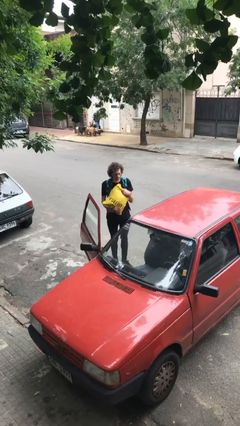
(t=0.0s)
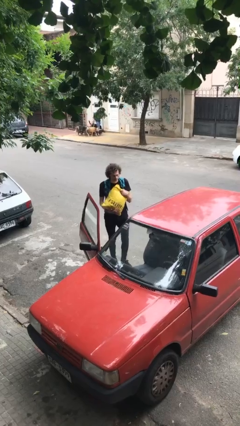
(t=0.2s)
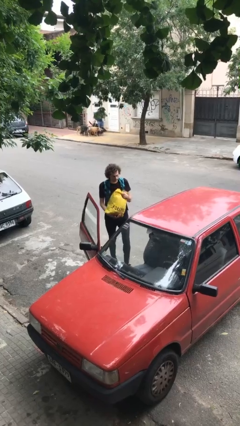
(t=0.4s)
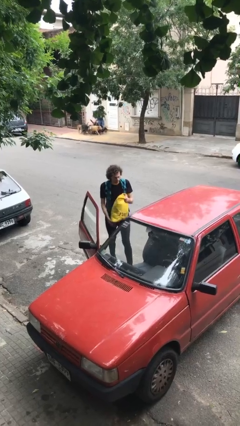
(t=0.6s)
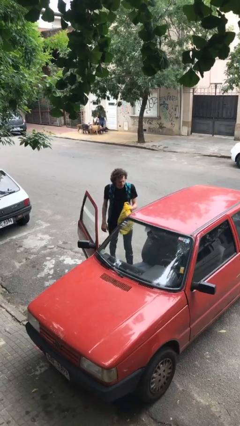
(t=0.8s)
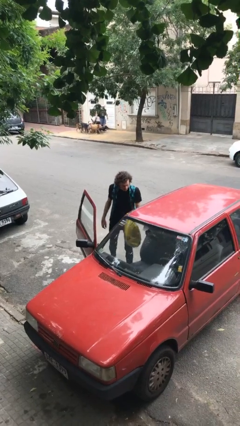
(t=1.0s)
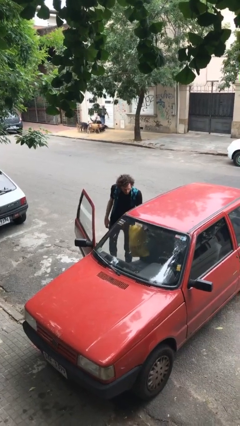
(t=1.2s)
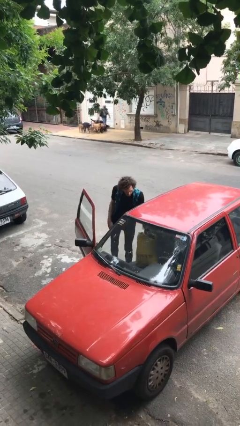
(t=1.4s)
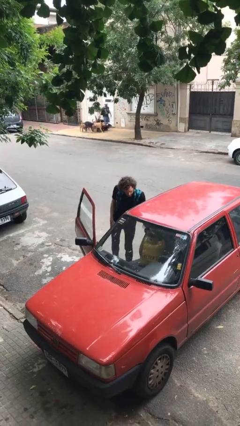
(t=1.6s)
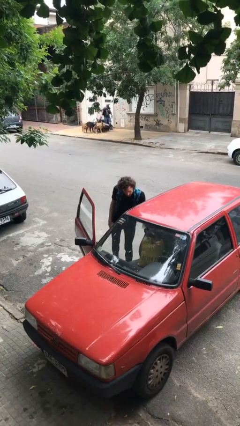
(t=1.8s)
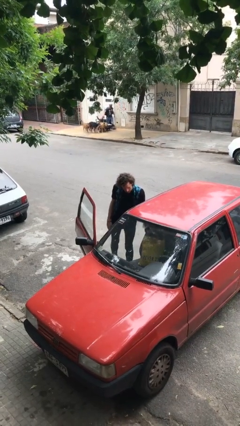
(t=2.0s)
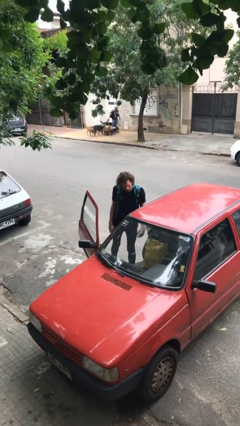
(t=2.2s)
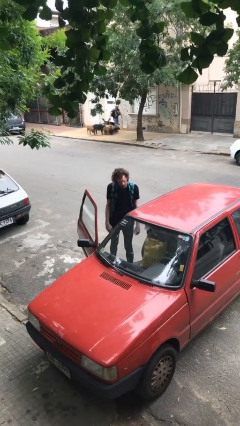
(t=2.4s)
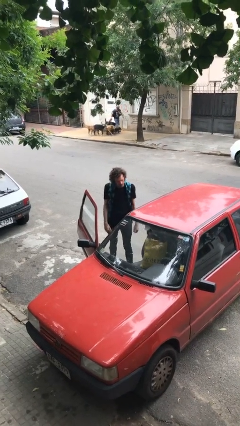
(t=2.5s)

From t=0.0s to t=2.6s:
person loads car

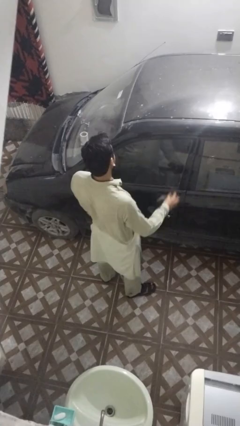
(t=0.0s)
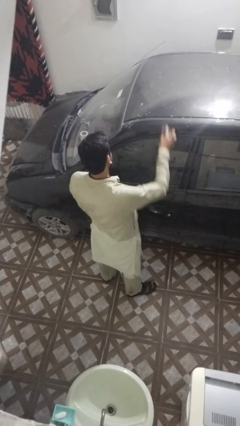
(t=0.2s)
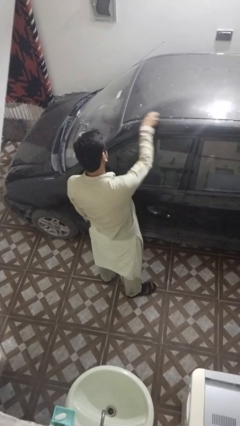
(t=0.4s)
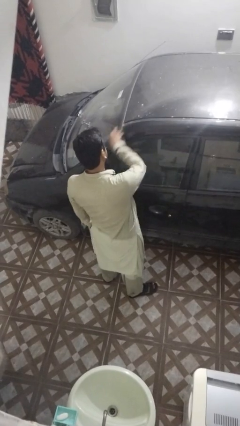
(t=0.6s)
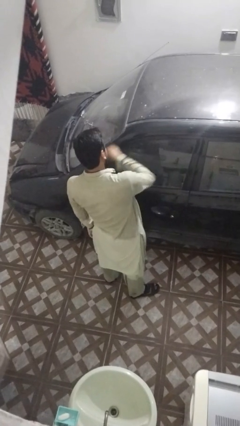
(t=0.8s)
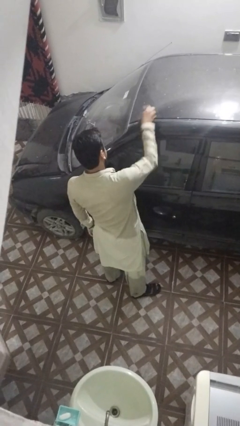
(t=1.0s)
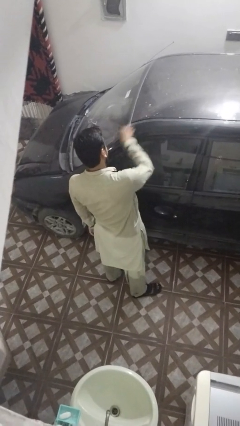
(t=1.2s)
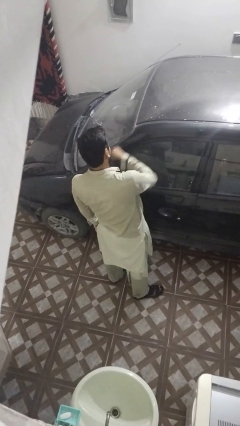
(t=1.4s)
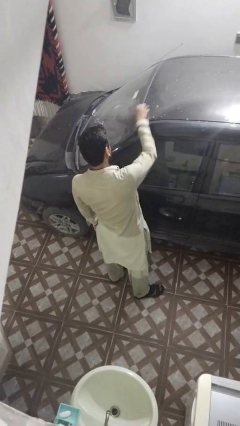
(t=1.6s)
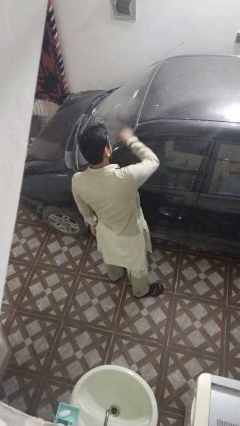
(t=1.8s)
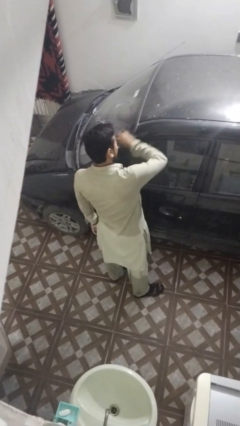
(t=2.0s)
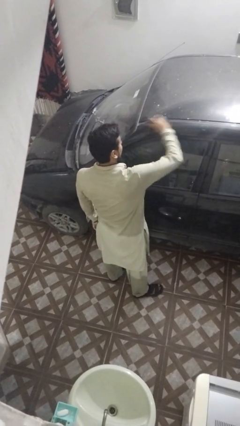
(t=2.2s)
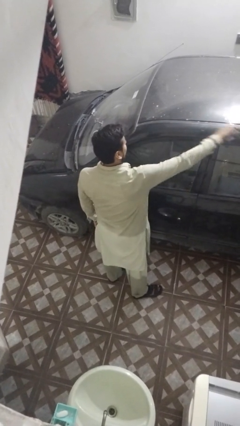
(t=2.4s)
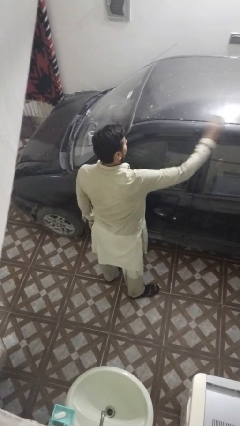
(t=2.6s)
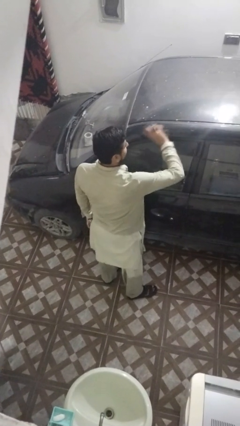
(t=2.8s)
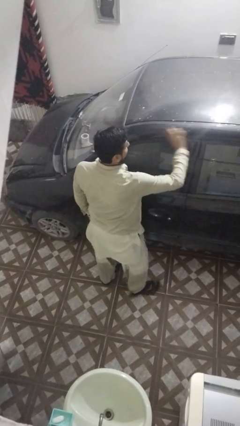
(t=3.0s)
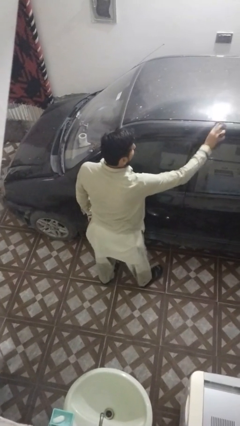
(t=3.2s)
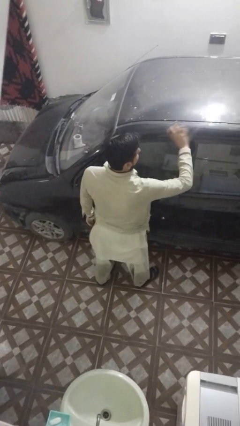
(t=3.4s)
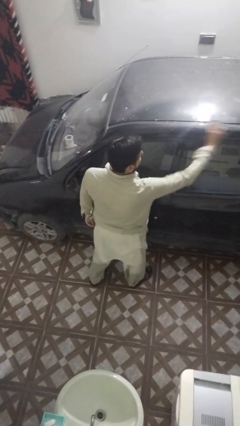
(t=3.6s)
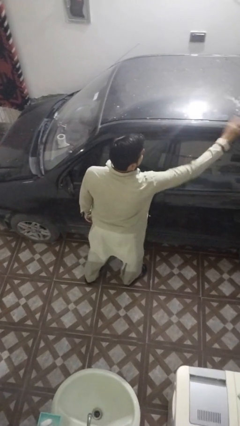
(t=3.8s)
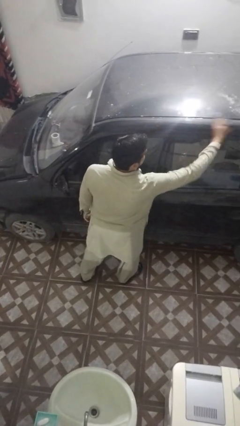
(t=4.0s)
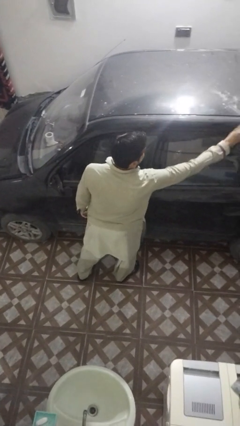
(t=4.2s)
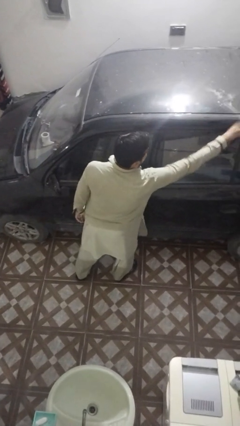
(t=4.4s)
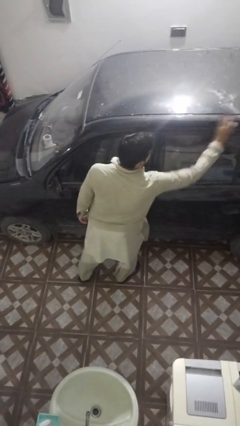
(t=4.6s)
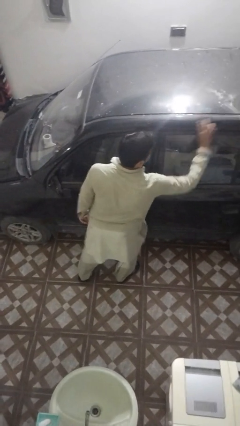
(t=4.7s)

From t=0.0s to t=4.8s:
person polishes car with rag

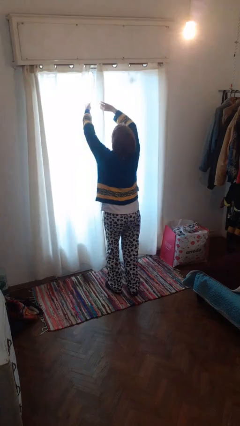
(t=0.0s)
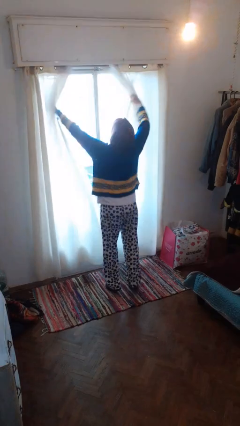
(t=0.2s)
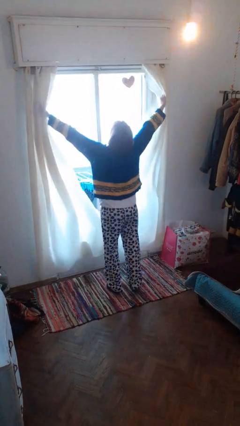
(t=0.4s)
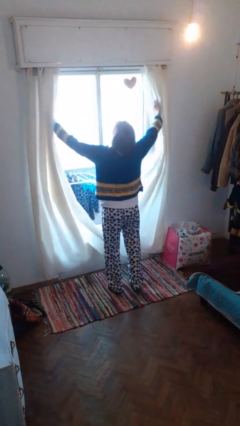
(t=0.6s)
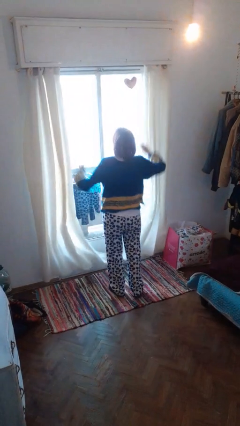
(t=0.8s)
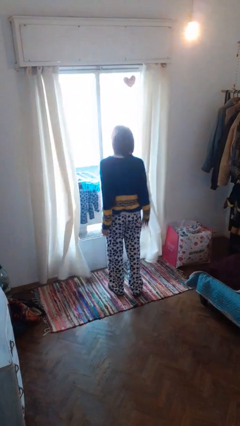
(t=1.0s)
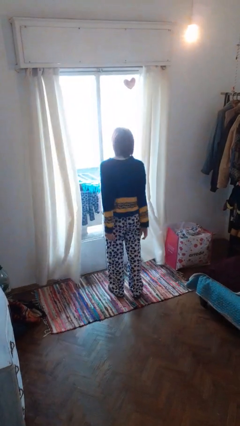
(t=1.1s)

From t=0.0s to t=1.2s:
person opens curtains

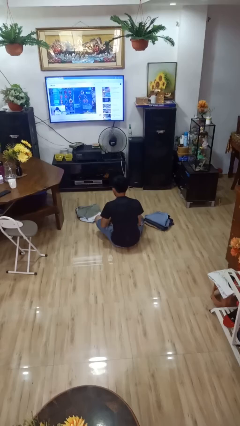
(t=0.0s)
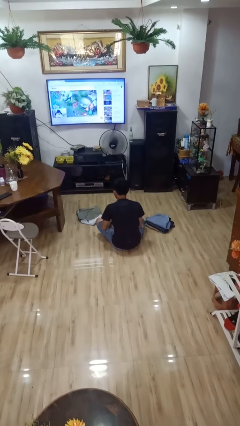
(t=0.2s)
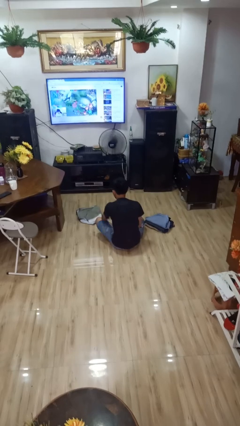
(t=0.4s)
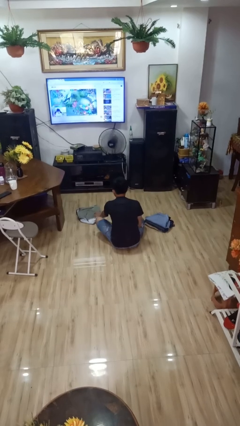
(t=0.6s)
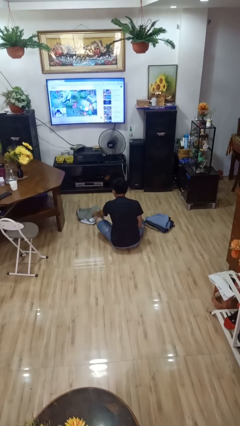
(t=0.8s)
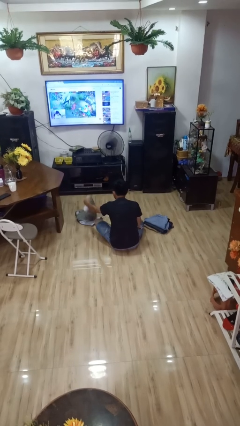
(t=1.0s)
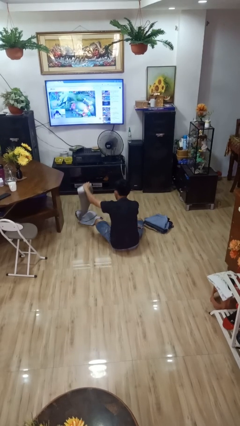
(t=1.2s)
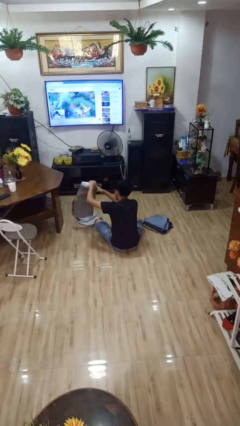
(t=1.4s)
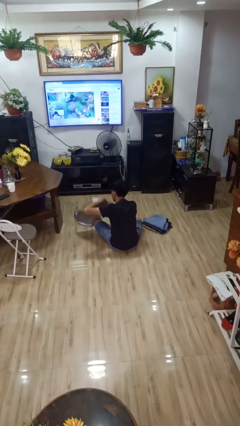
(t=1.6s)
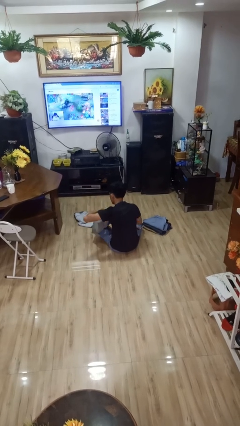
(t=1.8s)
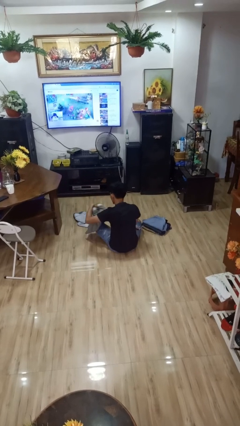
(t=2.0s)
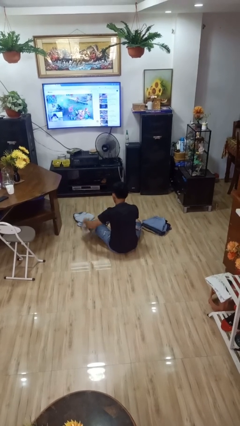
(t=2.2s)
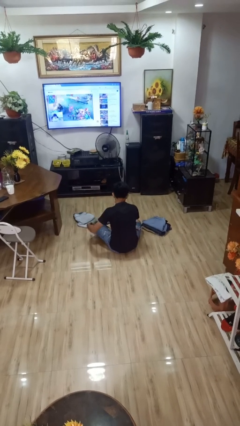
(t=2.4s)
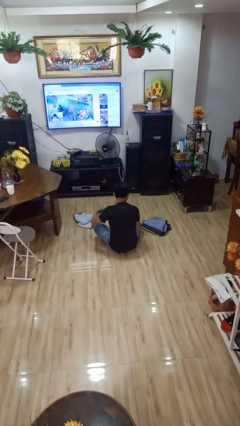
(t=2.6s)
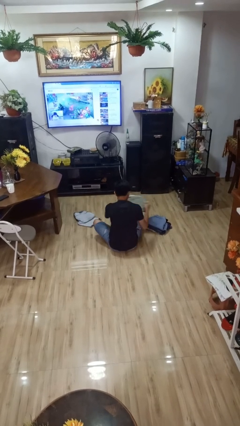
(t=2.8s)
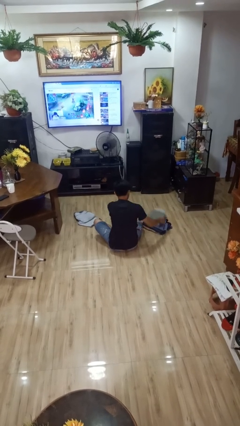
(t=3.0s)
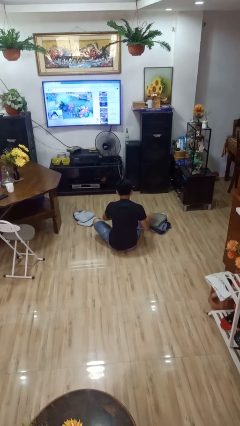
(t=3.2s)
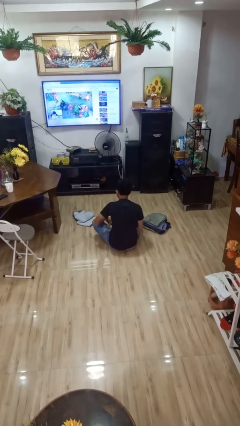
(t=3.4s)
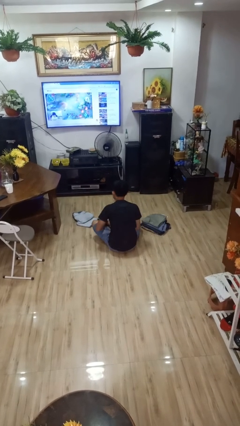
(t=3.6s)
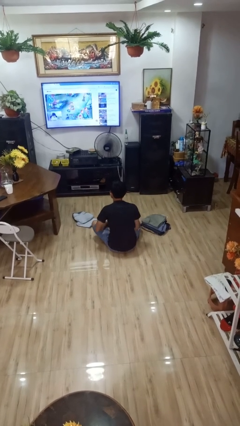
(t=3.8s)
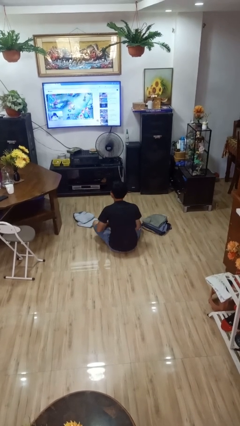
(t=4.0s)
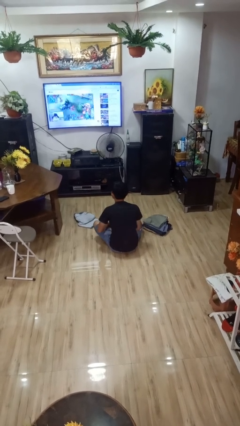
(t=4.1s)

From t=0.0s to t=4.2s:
person folds pants

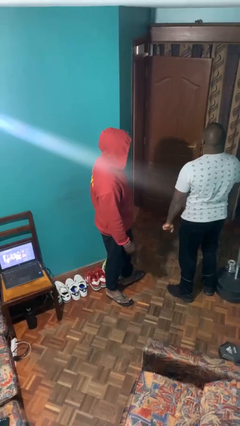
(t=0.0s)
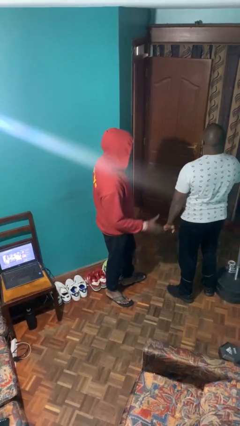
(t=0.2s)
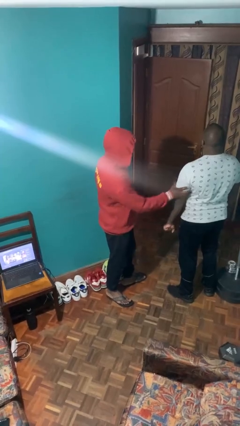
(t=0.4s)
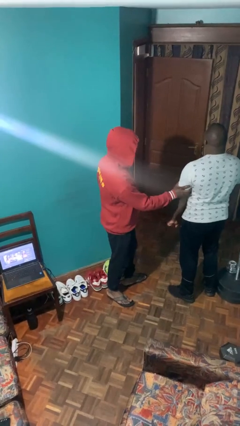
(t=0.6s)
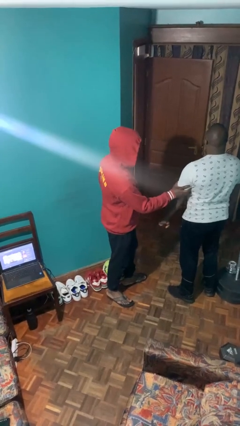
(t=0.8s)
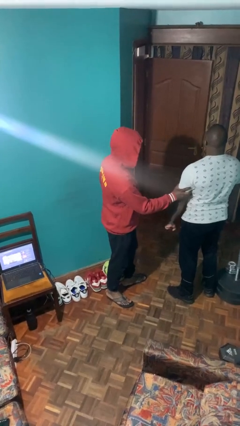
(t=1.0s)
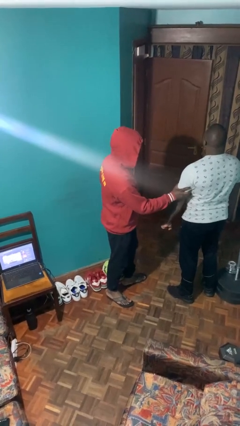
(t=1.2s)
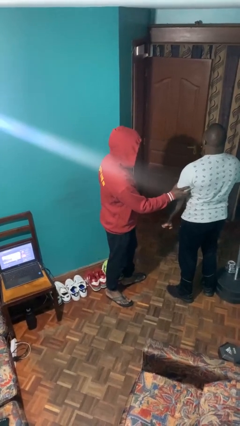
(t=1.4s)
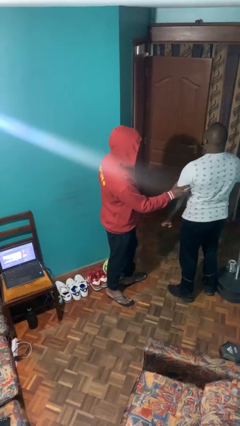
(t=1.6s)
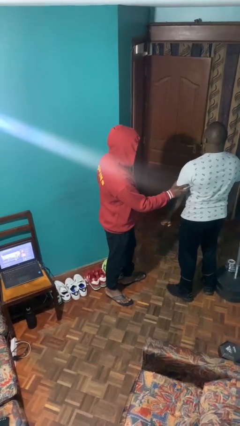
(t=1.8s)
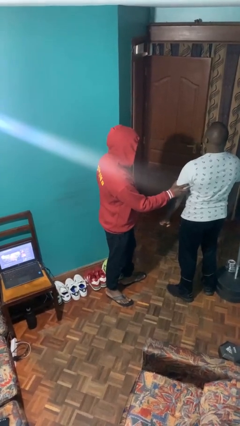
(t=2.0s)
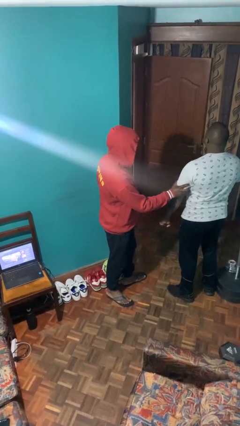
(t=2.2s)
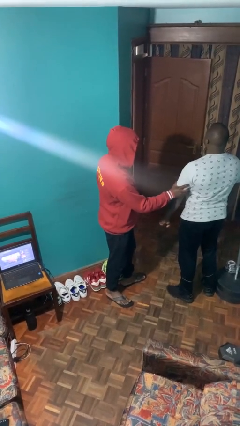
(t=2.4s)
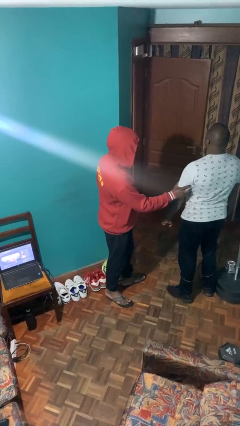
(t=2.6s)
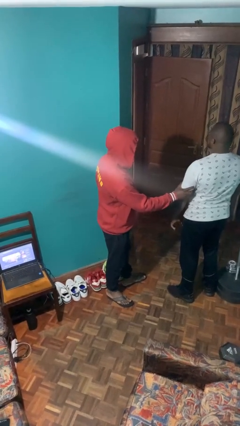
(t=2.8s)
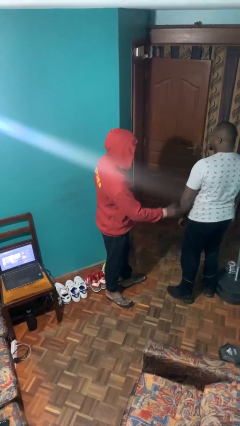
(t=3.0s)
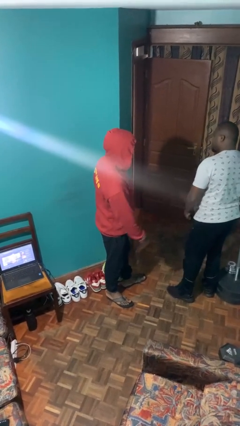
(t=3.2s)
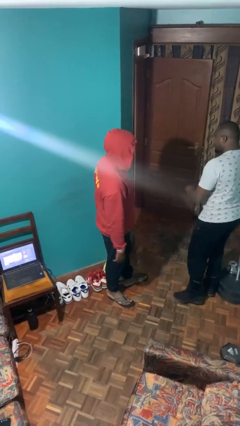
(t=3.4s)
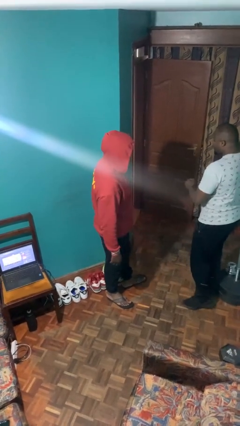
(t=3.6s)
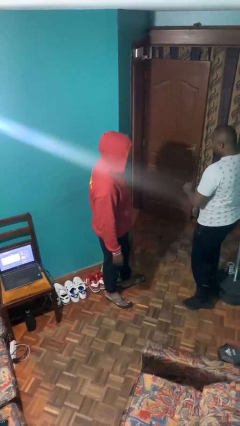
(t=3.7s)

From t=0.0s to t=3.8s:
person grabs person by bicep

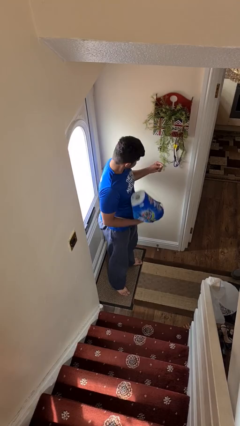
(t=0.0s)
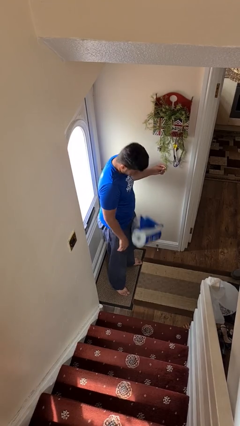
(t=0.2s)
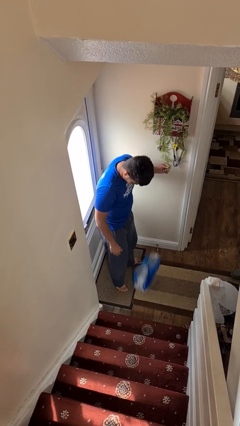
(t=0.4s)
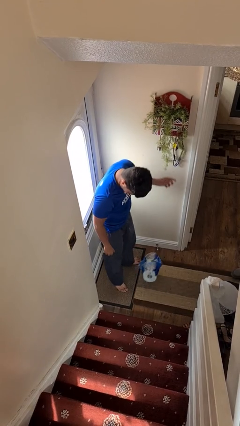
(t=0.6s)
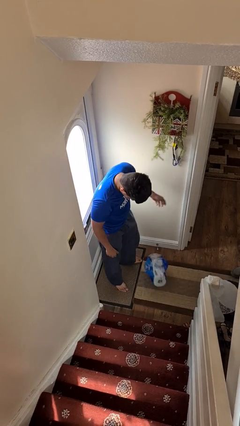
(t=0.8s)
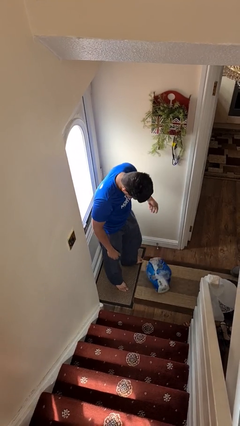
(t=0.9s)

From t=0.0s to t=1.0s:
person drops object
